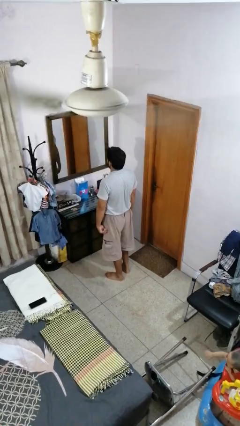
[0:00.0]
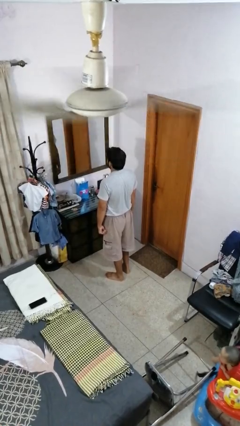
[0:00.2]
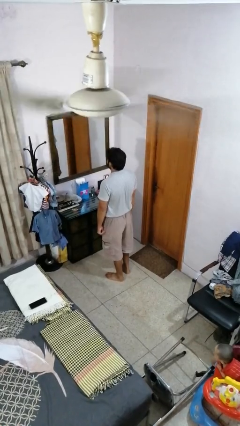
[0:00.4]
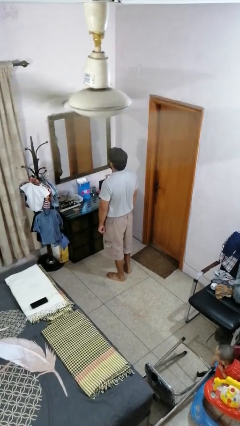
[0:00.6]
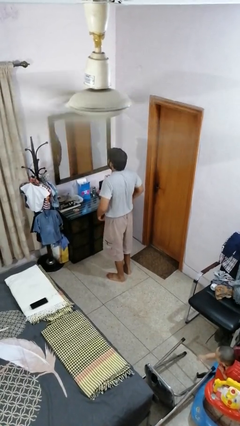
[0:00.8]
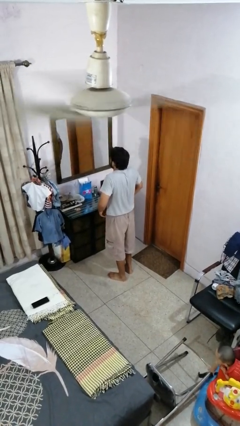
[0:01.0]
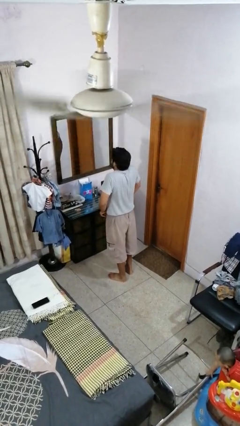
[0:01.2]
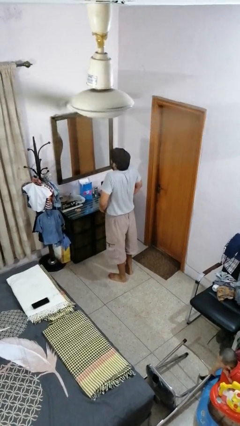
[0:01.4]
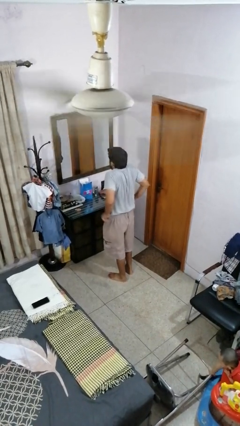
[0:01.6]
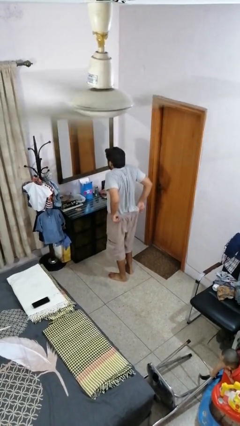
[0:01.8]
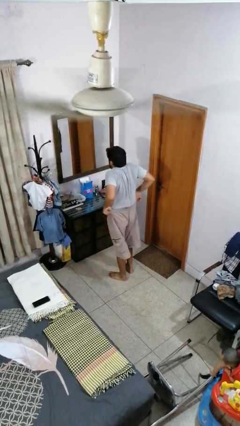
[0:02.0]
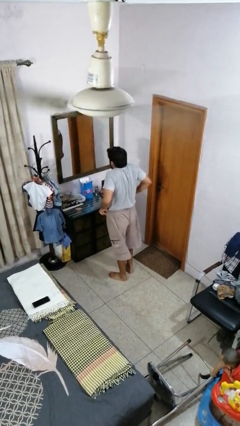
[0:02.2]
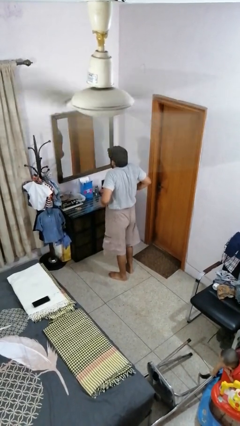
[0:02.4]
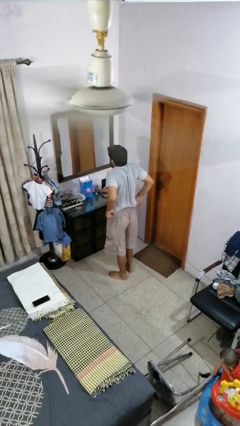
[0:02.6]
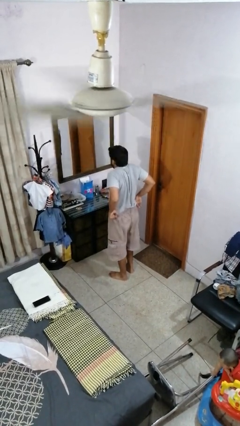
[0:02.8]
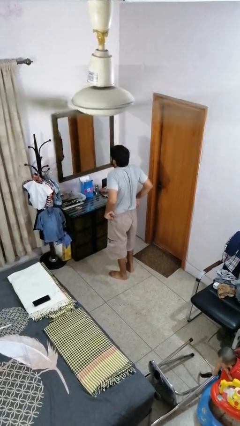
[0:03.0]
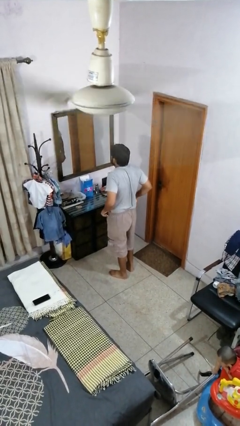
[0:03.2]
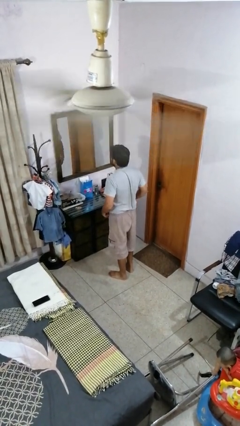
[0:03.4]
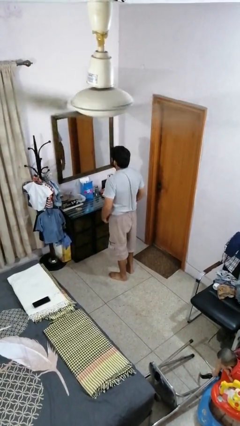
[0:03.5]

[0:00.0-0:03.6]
person hikes up pants

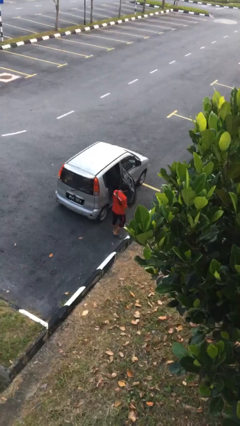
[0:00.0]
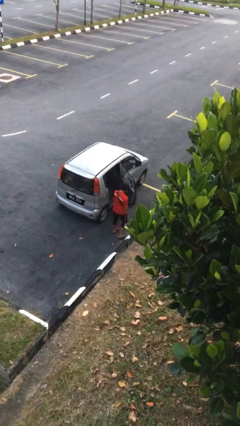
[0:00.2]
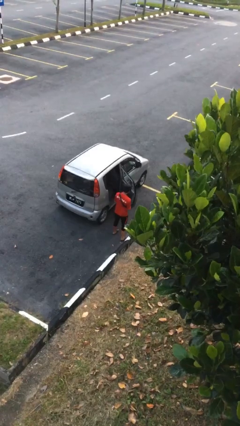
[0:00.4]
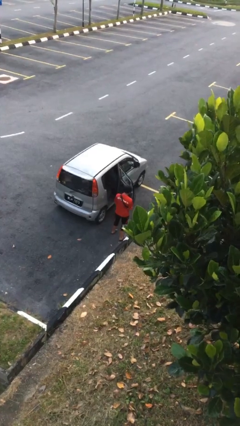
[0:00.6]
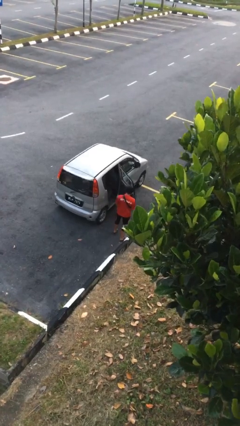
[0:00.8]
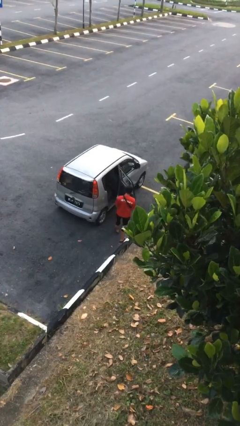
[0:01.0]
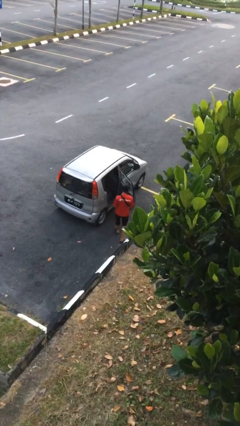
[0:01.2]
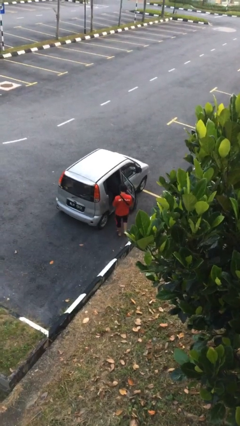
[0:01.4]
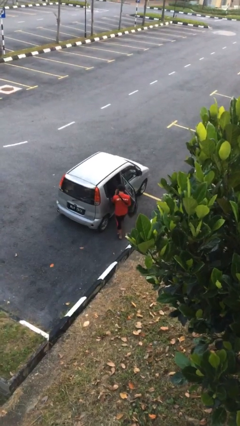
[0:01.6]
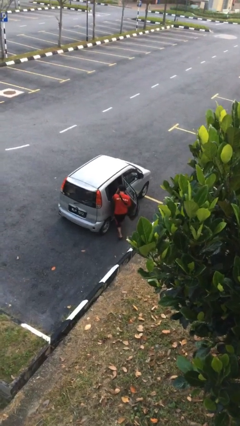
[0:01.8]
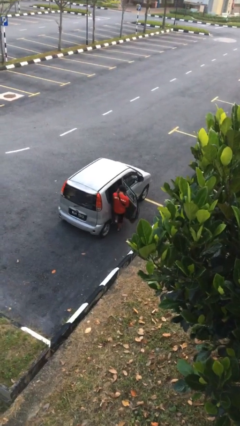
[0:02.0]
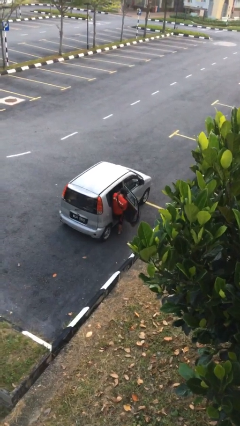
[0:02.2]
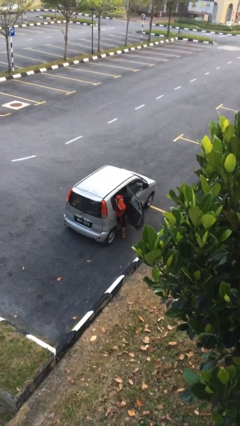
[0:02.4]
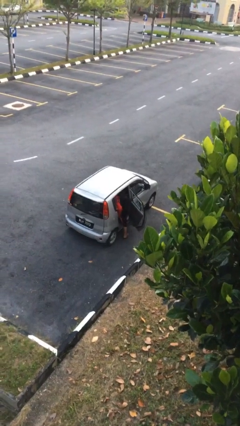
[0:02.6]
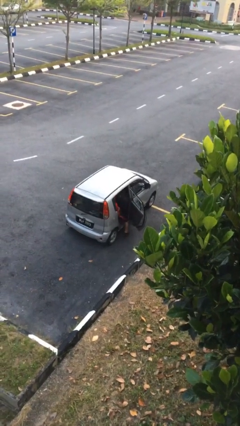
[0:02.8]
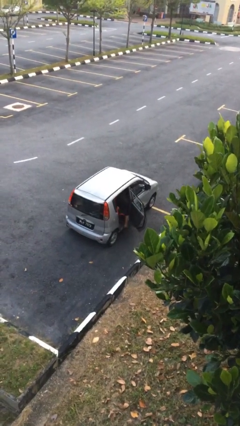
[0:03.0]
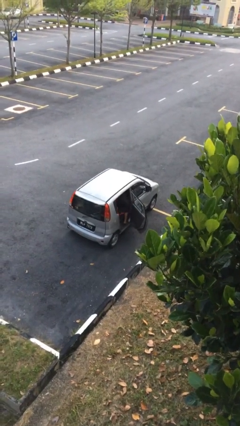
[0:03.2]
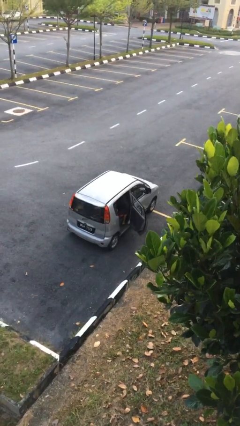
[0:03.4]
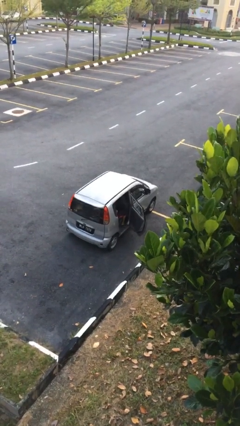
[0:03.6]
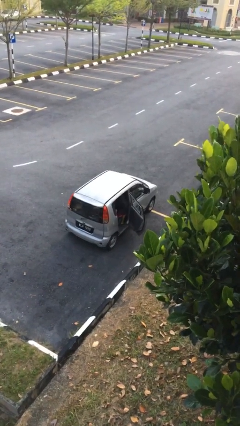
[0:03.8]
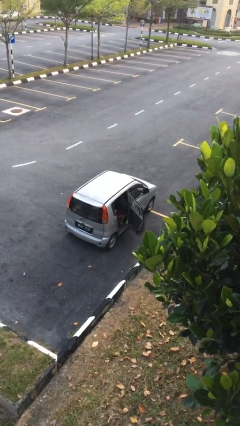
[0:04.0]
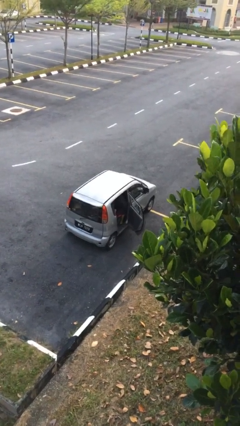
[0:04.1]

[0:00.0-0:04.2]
person enters car

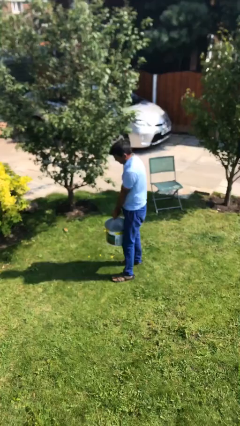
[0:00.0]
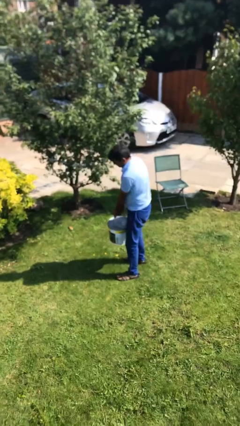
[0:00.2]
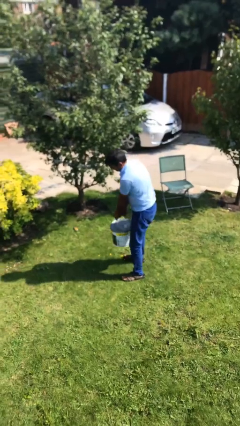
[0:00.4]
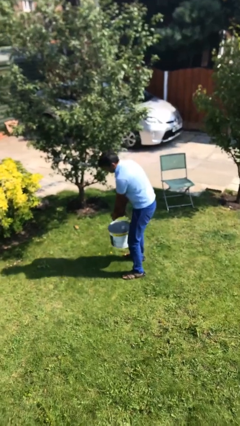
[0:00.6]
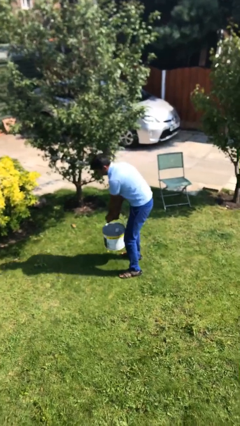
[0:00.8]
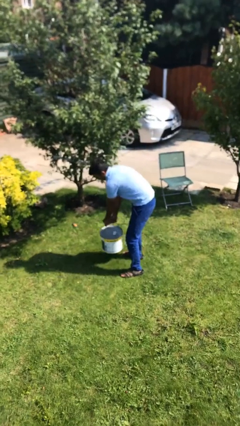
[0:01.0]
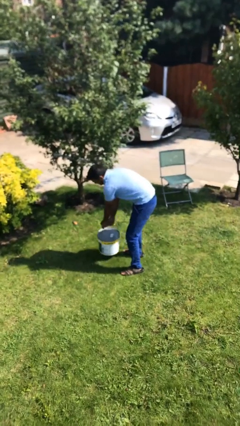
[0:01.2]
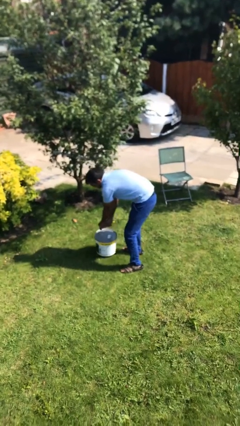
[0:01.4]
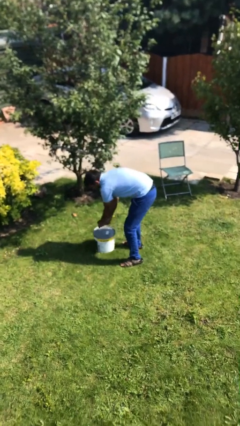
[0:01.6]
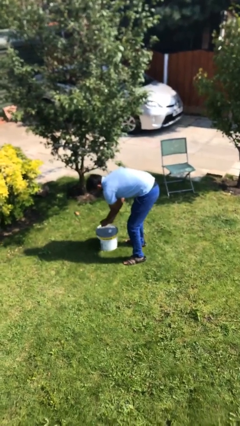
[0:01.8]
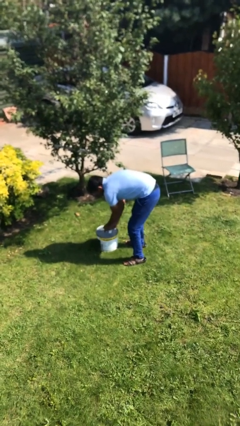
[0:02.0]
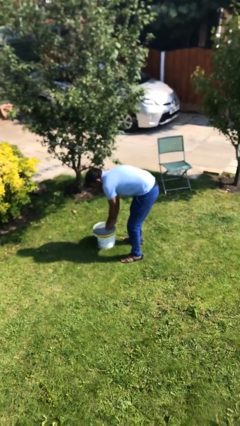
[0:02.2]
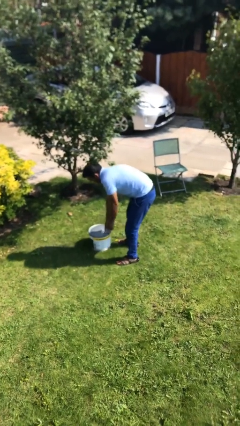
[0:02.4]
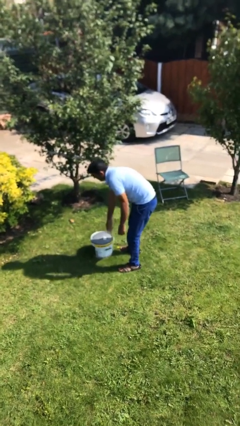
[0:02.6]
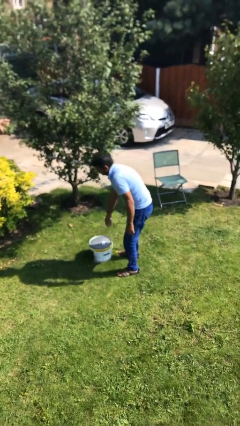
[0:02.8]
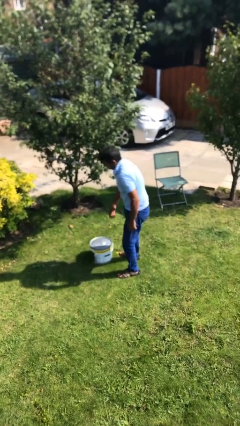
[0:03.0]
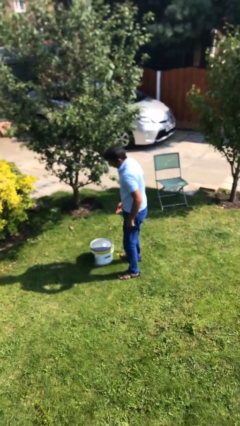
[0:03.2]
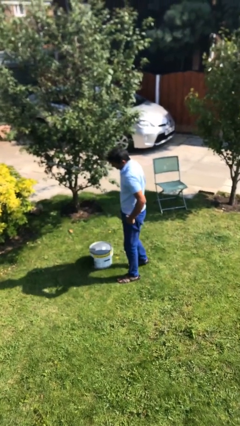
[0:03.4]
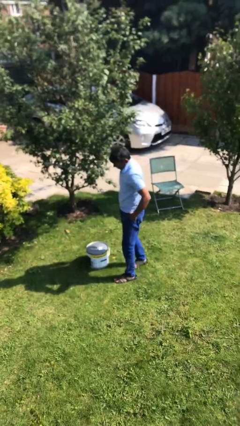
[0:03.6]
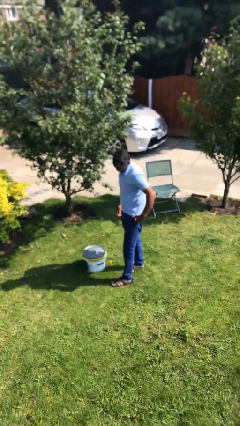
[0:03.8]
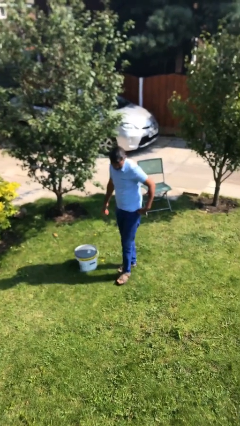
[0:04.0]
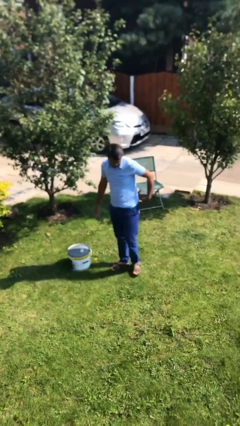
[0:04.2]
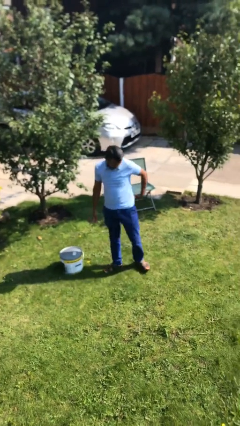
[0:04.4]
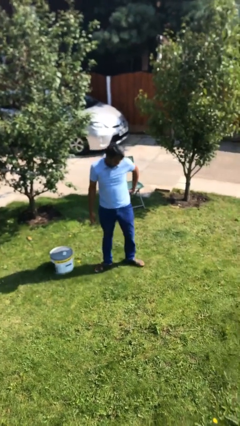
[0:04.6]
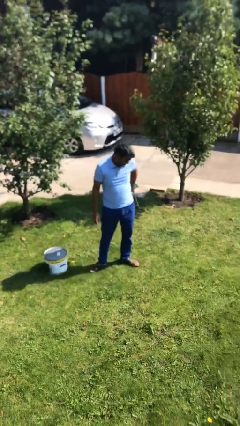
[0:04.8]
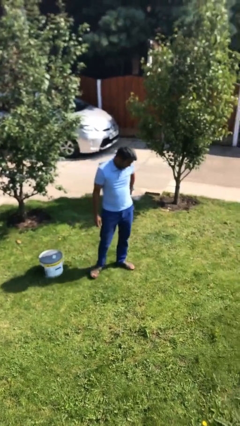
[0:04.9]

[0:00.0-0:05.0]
person puts down object on floor

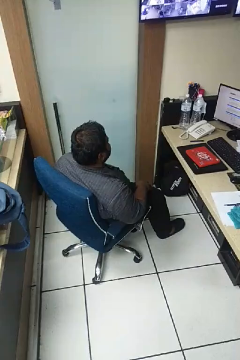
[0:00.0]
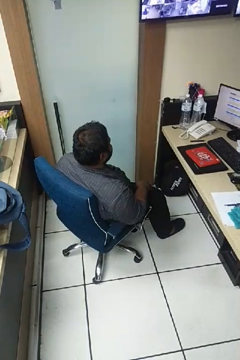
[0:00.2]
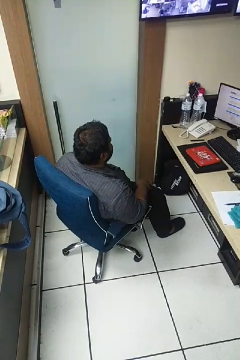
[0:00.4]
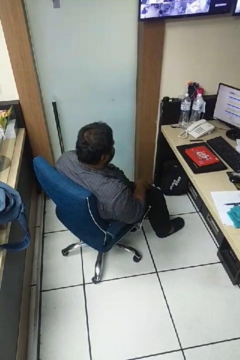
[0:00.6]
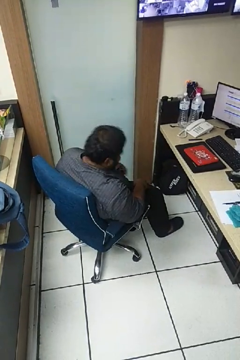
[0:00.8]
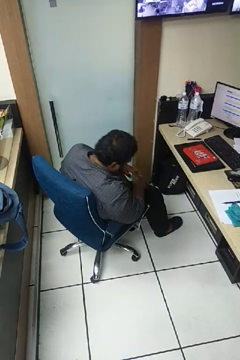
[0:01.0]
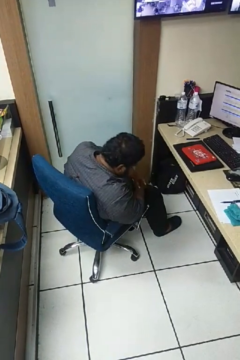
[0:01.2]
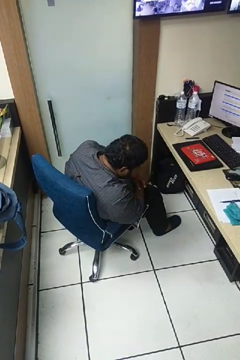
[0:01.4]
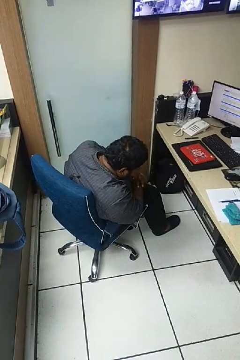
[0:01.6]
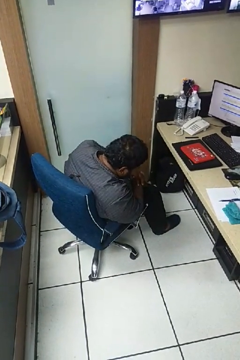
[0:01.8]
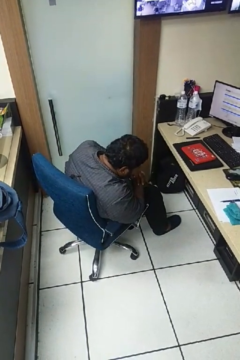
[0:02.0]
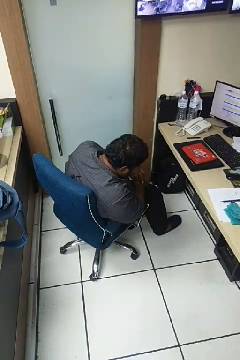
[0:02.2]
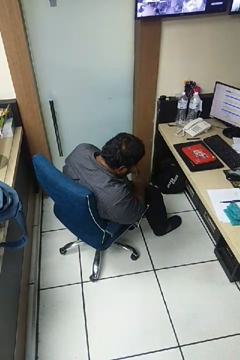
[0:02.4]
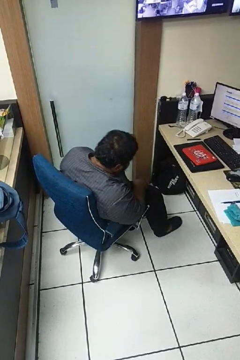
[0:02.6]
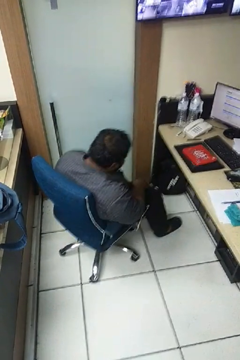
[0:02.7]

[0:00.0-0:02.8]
person looks at hands in lap

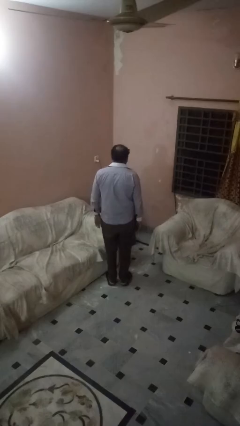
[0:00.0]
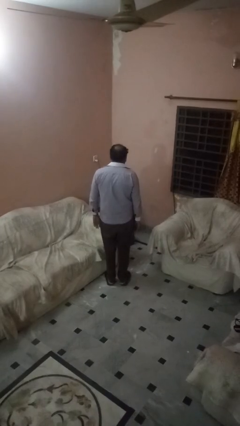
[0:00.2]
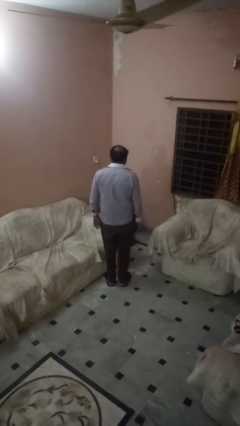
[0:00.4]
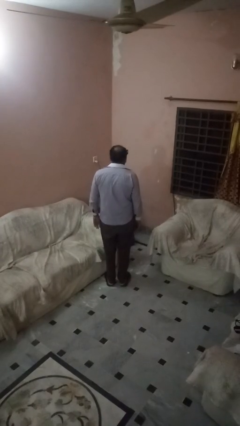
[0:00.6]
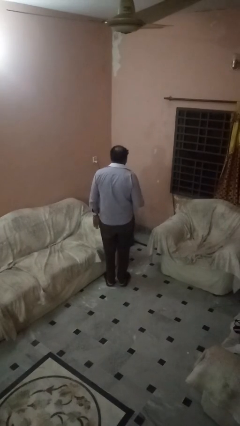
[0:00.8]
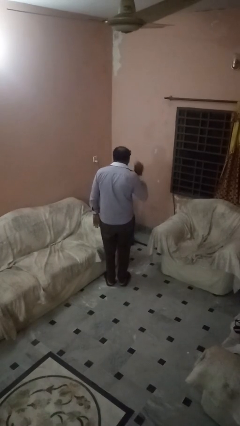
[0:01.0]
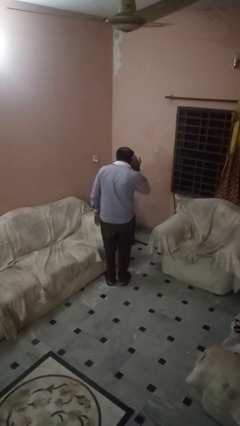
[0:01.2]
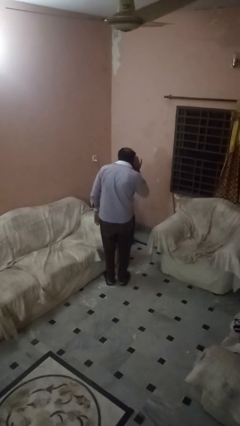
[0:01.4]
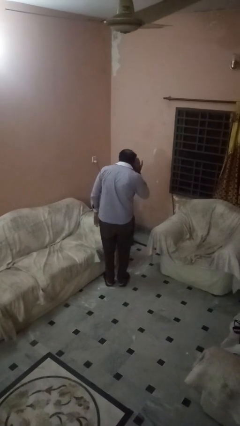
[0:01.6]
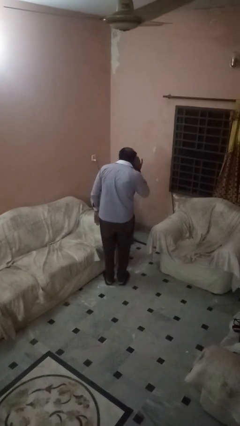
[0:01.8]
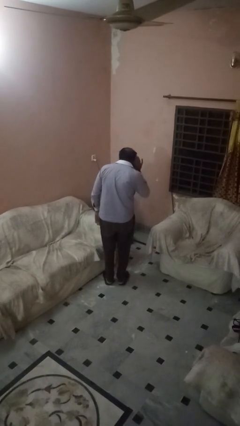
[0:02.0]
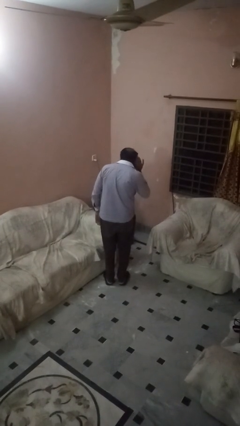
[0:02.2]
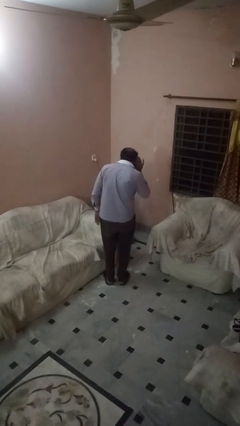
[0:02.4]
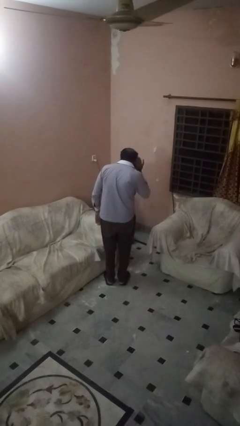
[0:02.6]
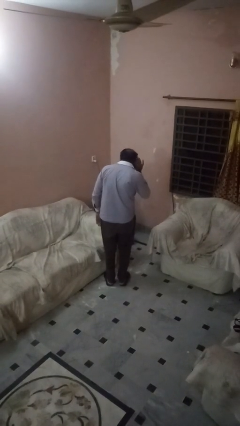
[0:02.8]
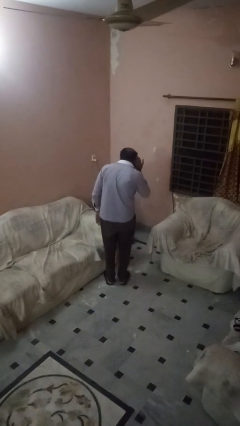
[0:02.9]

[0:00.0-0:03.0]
person gestures listen closely
